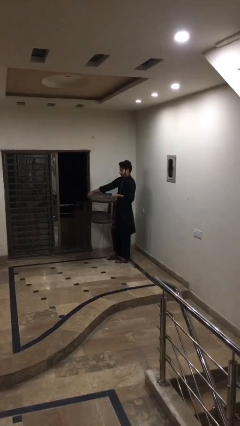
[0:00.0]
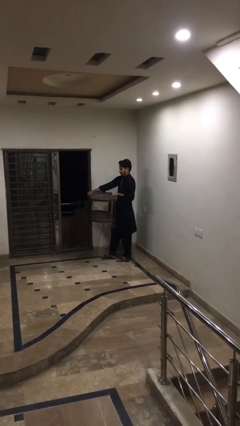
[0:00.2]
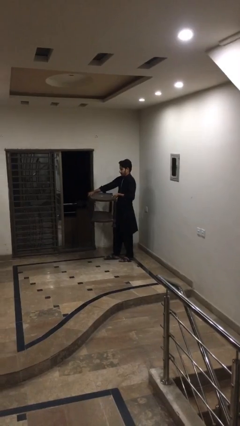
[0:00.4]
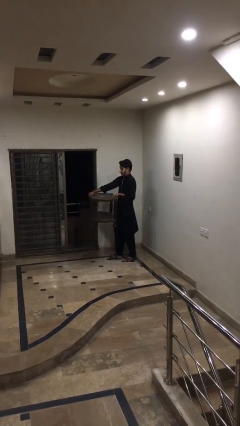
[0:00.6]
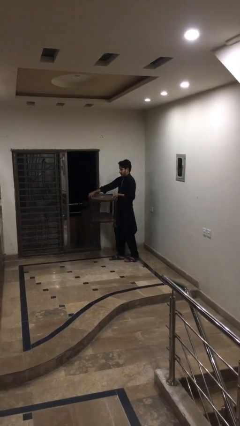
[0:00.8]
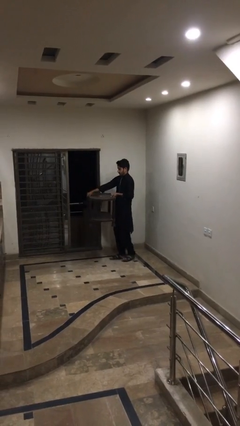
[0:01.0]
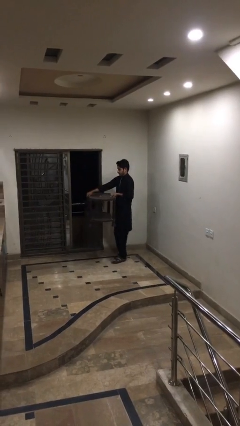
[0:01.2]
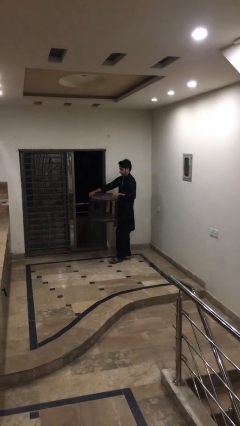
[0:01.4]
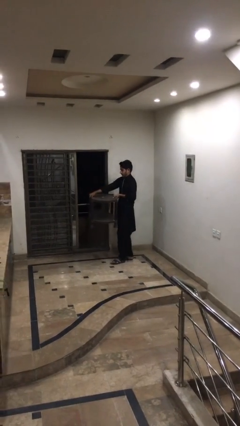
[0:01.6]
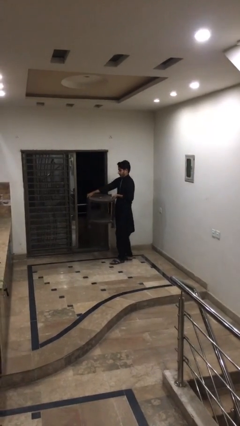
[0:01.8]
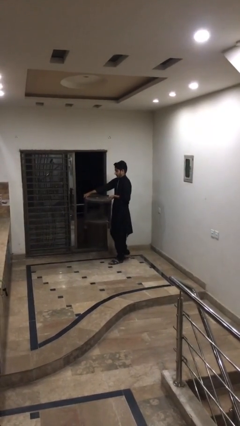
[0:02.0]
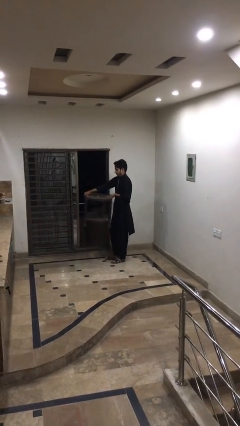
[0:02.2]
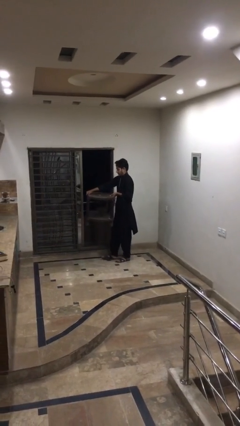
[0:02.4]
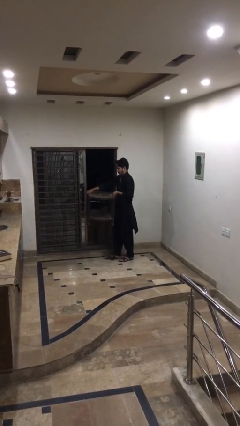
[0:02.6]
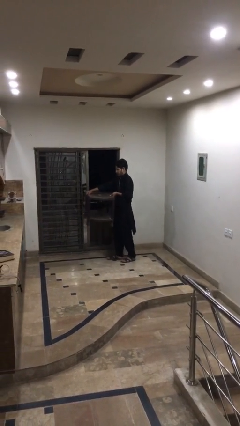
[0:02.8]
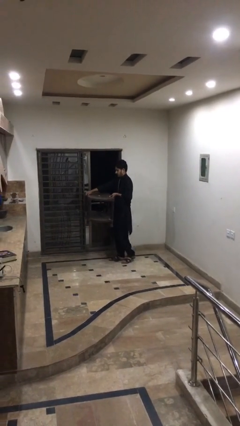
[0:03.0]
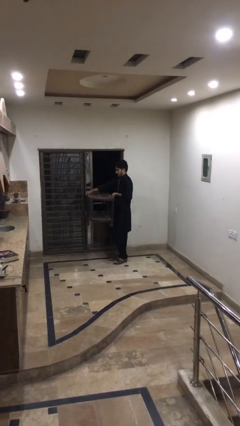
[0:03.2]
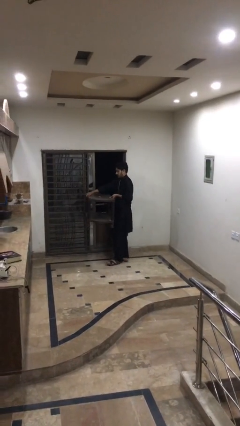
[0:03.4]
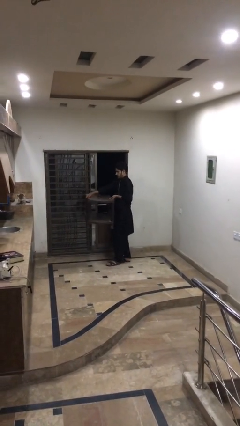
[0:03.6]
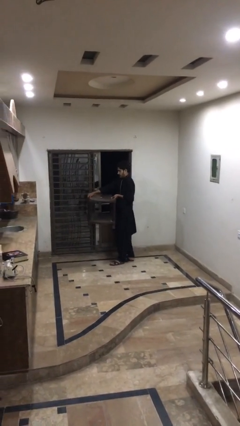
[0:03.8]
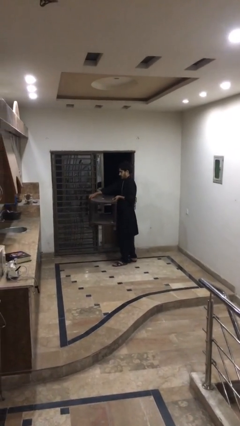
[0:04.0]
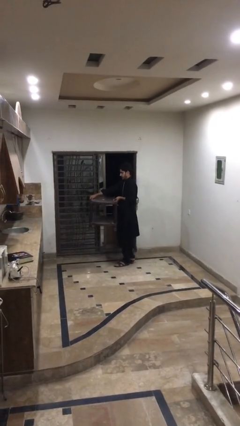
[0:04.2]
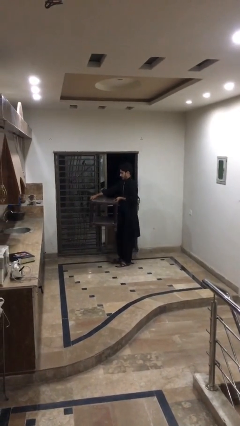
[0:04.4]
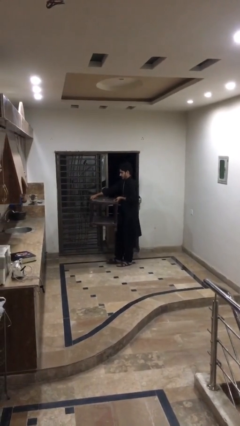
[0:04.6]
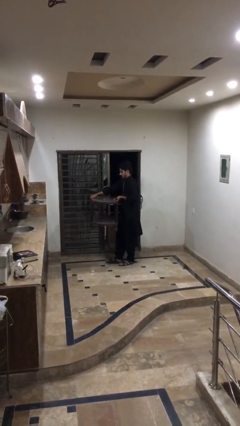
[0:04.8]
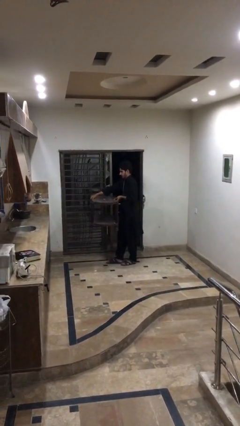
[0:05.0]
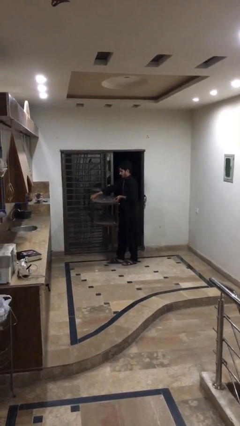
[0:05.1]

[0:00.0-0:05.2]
person carries heavy object

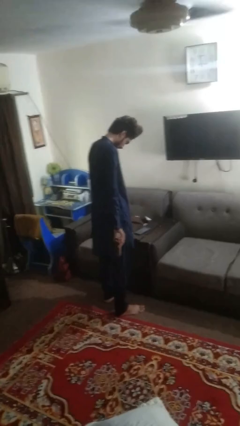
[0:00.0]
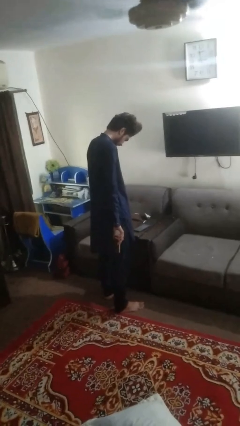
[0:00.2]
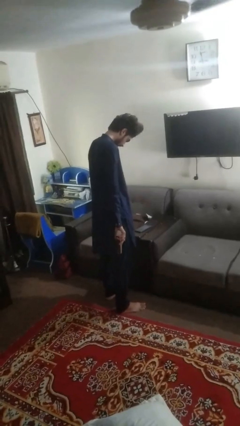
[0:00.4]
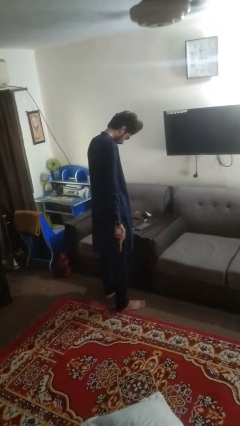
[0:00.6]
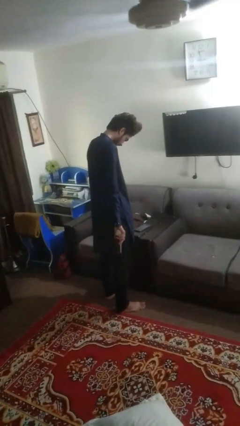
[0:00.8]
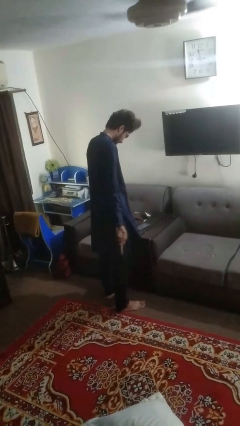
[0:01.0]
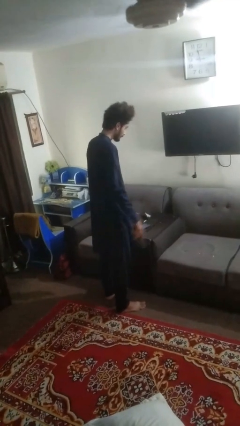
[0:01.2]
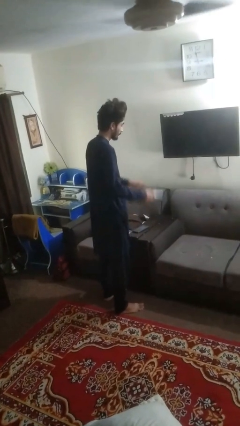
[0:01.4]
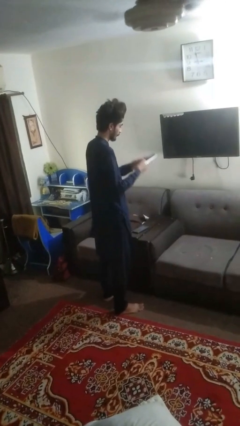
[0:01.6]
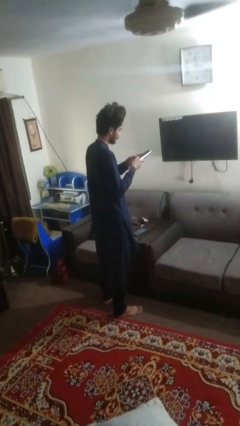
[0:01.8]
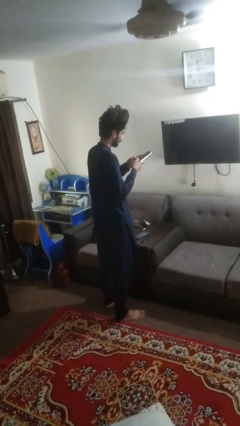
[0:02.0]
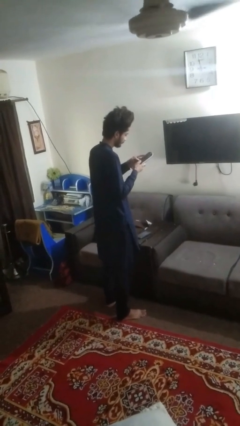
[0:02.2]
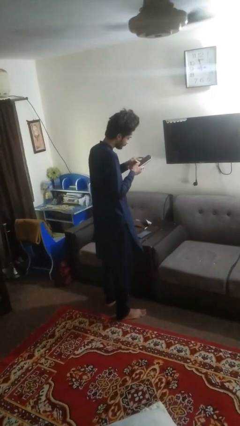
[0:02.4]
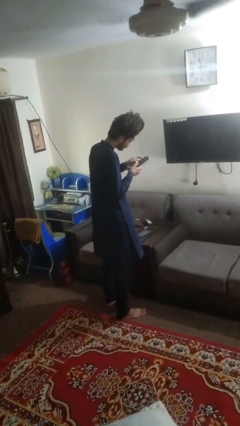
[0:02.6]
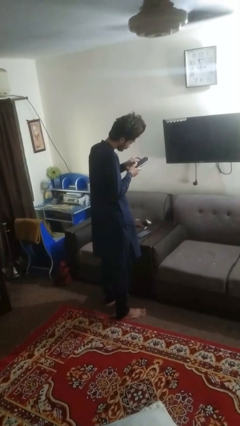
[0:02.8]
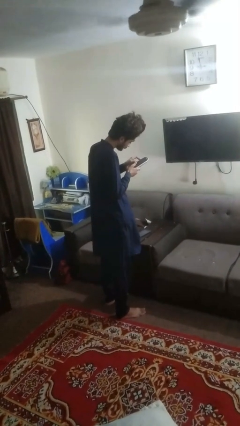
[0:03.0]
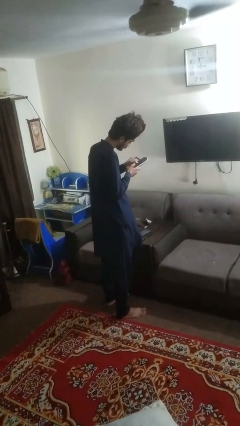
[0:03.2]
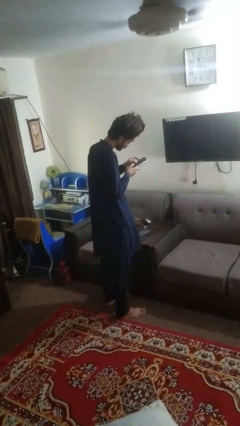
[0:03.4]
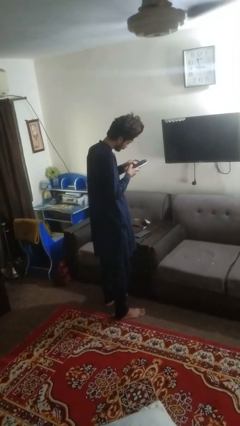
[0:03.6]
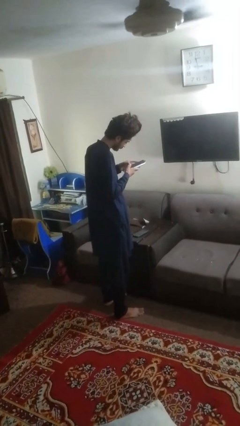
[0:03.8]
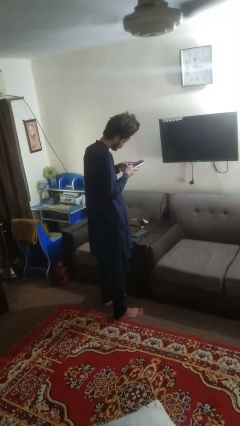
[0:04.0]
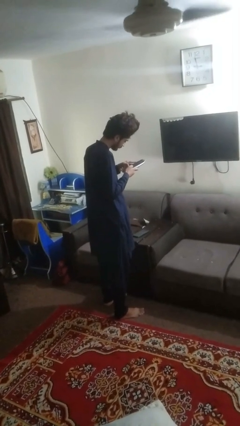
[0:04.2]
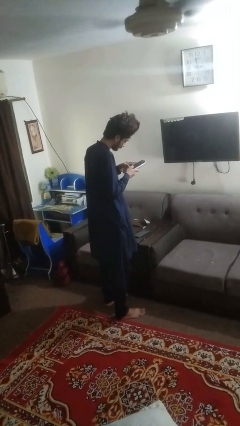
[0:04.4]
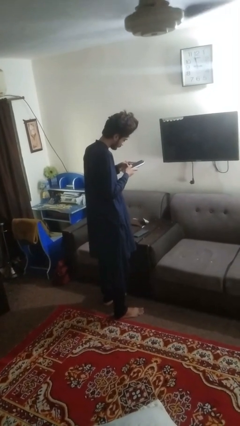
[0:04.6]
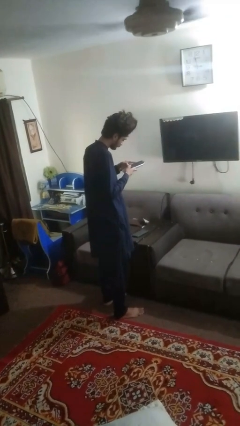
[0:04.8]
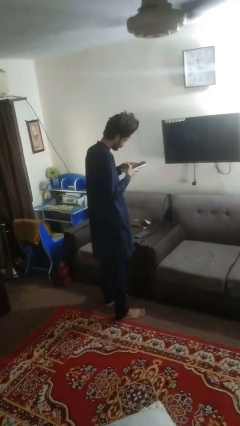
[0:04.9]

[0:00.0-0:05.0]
person uses television remote

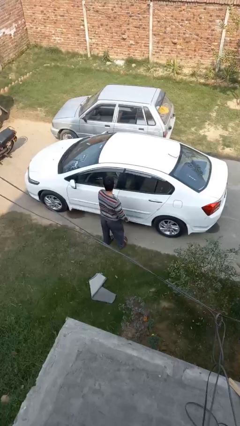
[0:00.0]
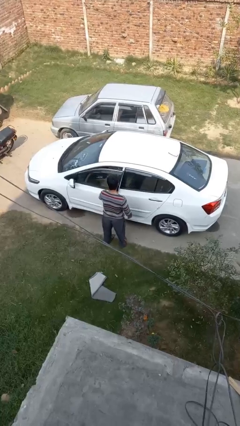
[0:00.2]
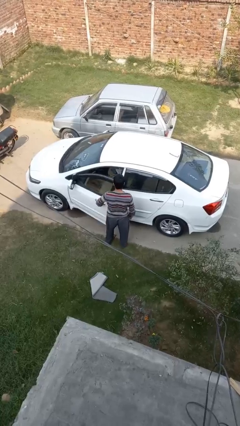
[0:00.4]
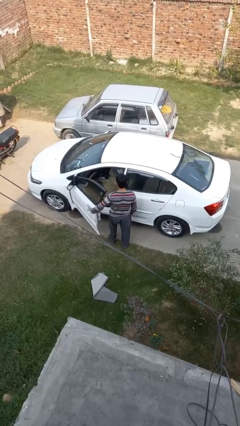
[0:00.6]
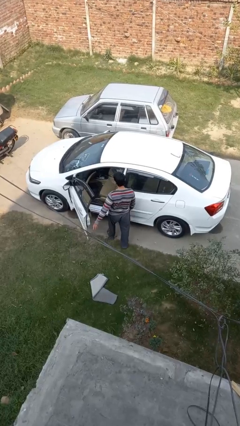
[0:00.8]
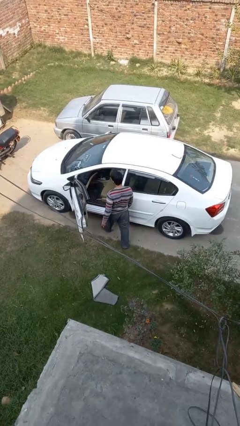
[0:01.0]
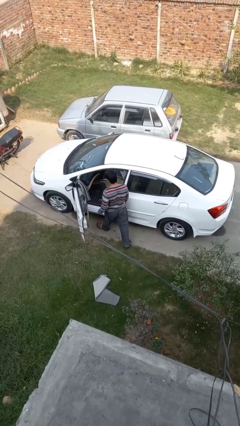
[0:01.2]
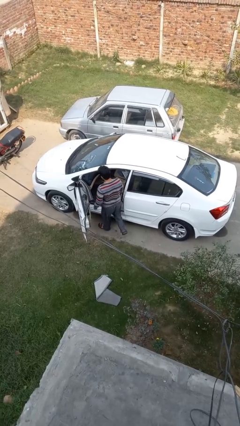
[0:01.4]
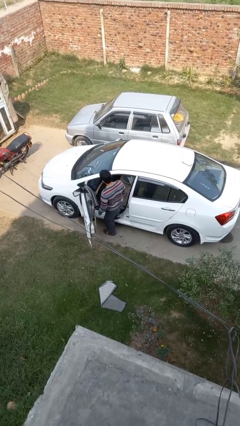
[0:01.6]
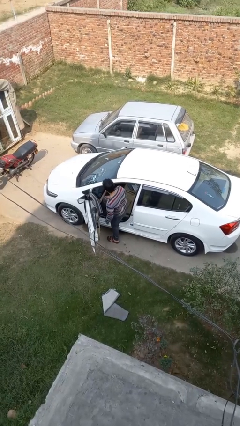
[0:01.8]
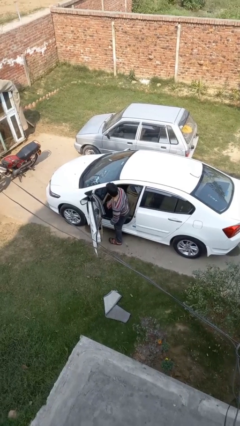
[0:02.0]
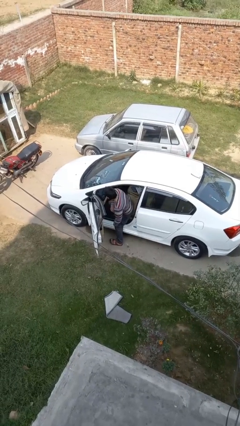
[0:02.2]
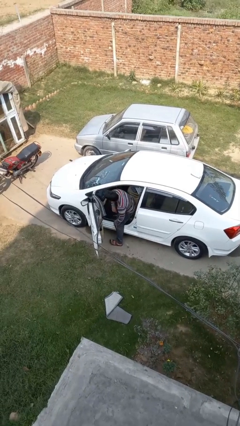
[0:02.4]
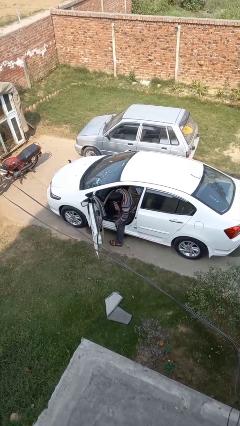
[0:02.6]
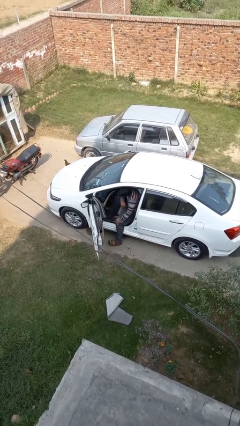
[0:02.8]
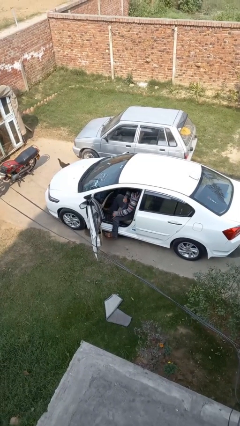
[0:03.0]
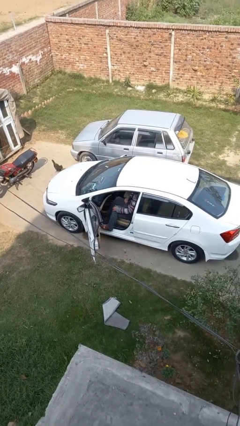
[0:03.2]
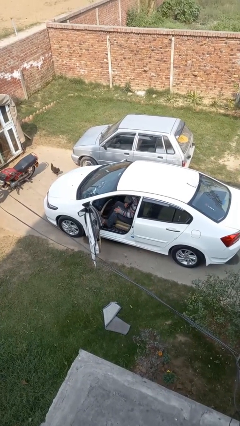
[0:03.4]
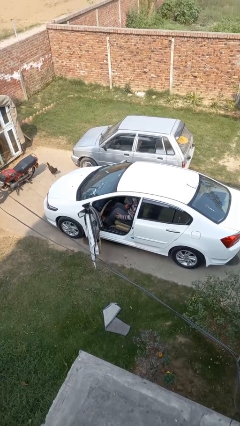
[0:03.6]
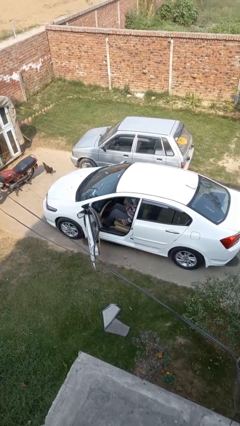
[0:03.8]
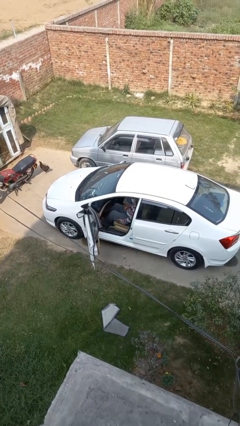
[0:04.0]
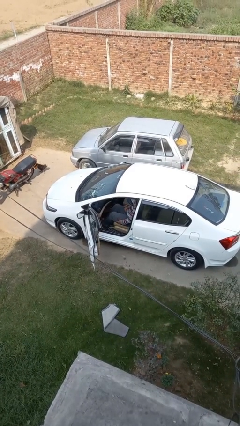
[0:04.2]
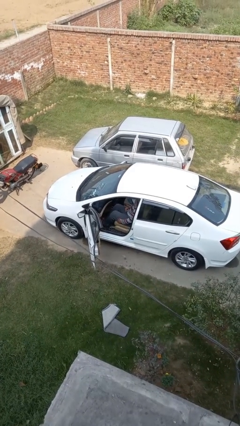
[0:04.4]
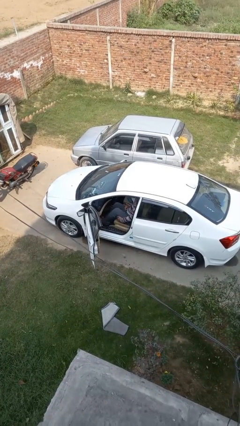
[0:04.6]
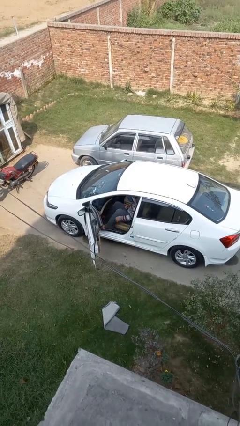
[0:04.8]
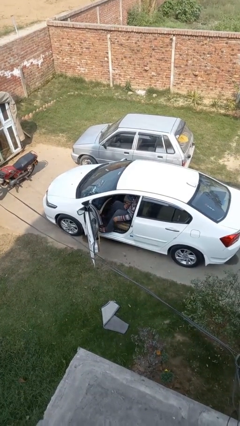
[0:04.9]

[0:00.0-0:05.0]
person enters car

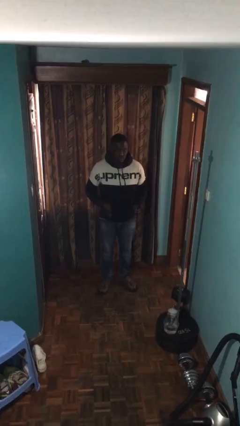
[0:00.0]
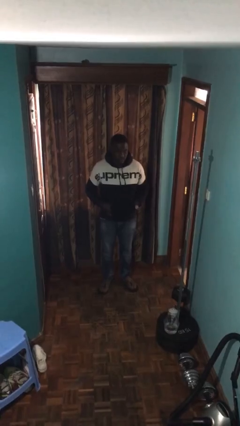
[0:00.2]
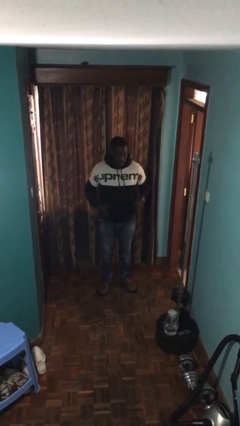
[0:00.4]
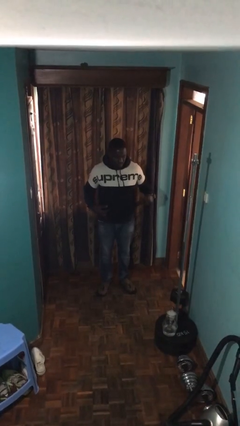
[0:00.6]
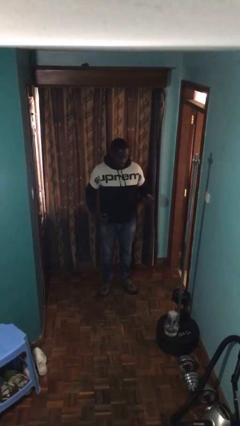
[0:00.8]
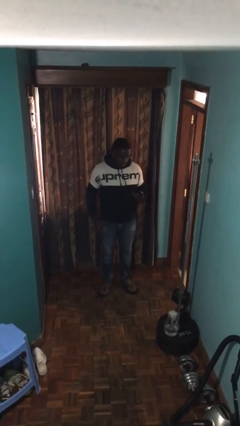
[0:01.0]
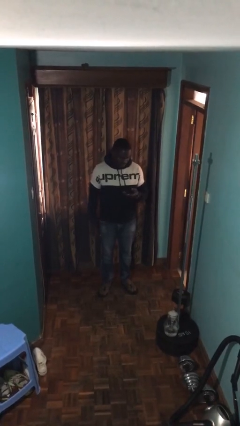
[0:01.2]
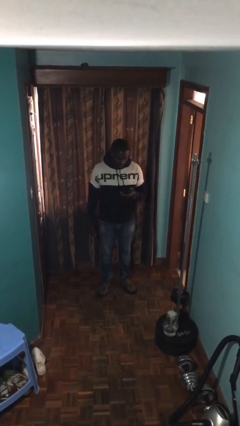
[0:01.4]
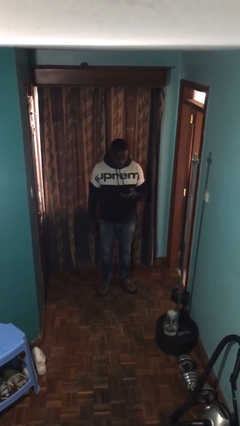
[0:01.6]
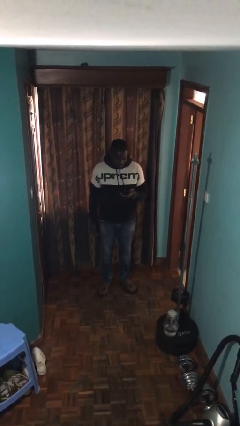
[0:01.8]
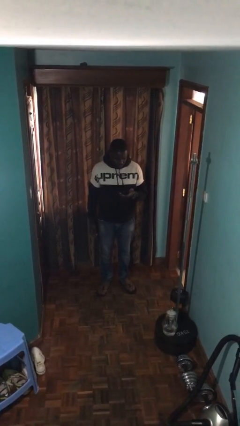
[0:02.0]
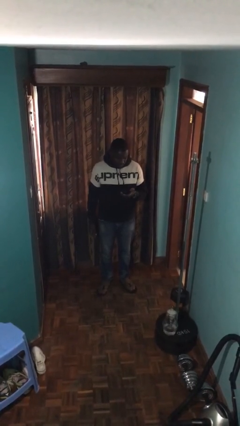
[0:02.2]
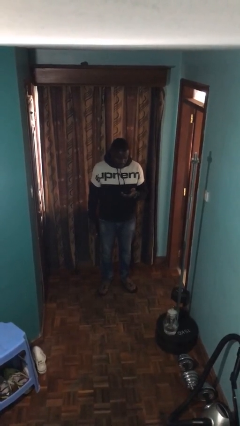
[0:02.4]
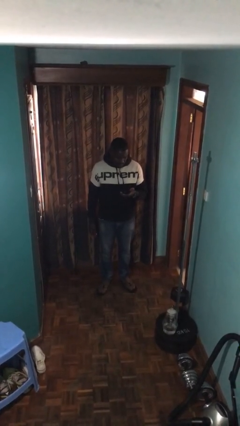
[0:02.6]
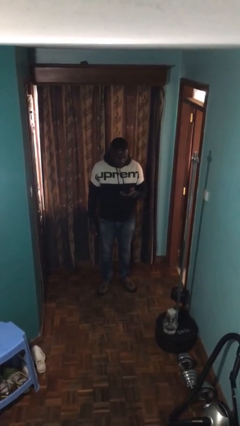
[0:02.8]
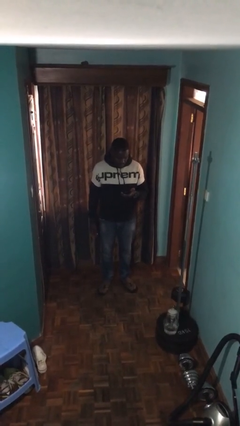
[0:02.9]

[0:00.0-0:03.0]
person takes phone from pocket
